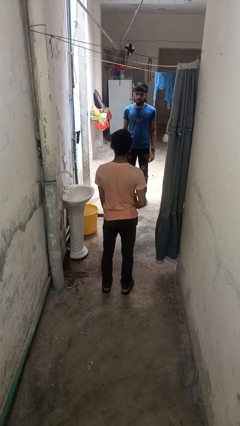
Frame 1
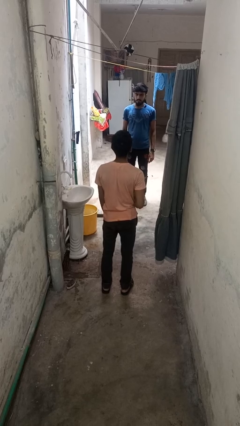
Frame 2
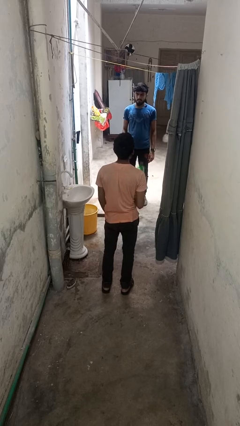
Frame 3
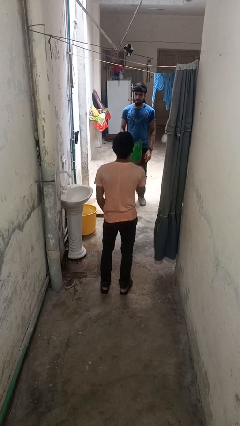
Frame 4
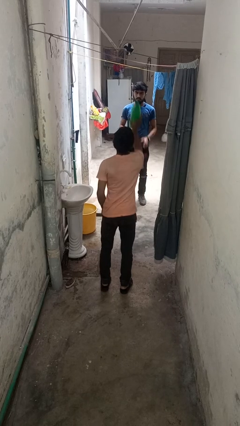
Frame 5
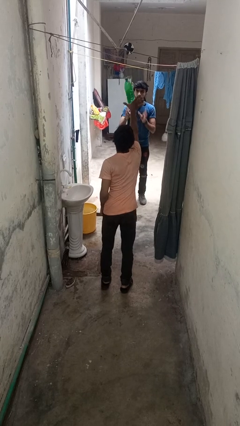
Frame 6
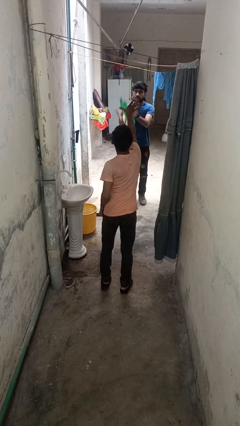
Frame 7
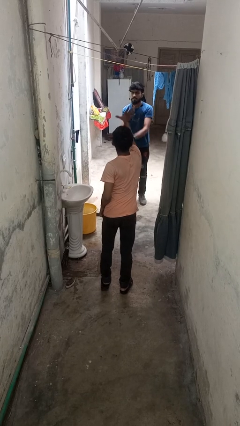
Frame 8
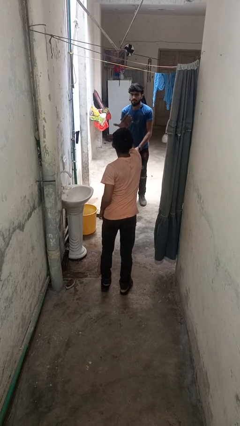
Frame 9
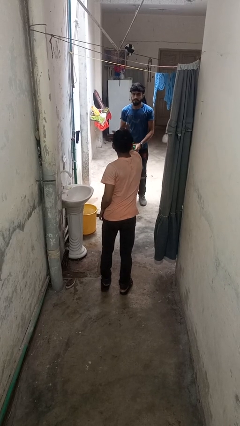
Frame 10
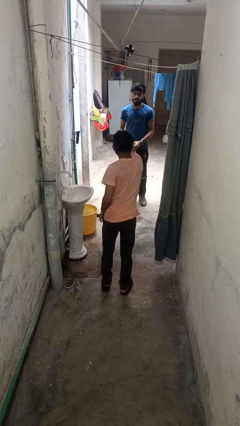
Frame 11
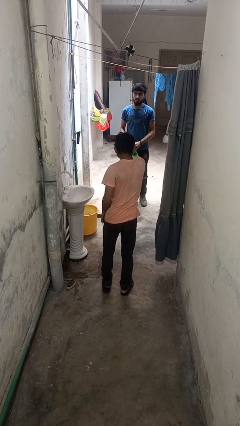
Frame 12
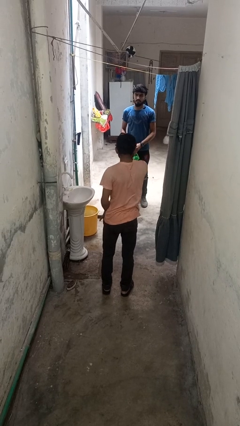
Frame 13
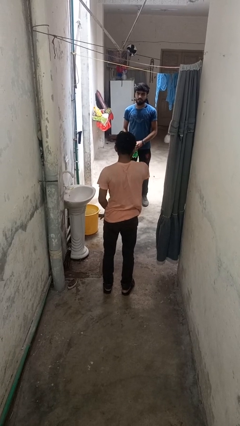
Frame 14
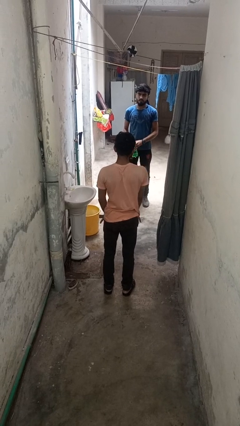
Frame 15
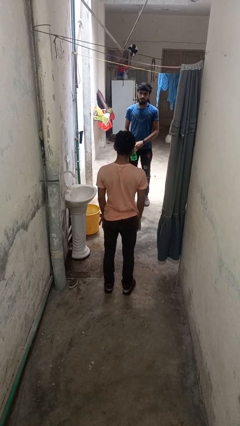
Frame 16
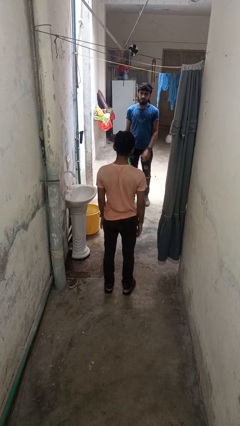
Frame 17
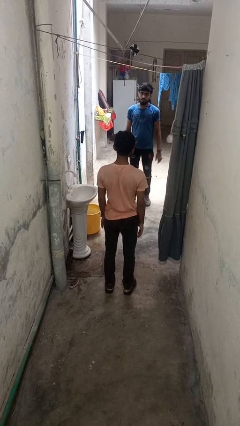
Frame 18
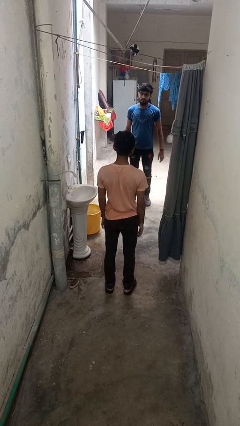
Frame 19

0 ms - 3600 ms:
person throws object to person

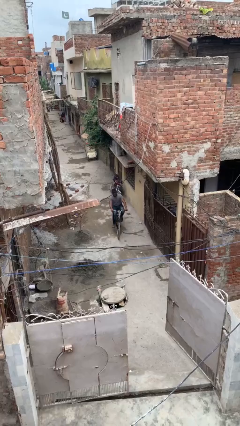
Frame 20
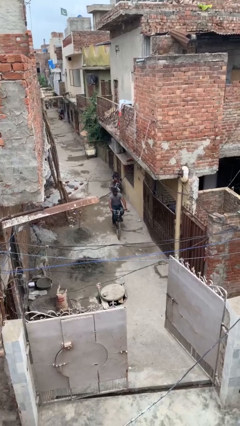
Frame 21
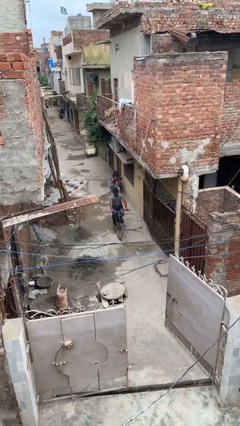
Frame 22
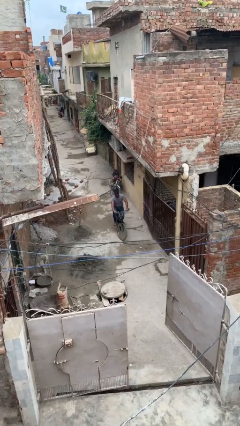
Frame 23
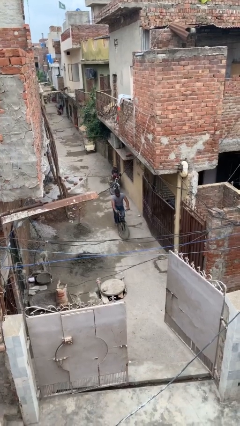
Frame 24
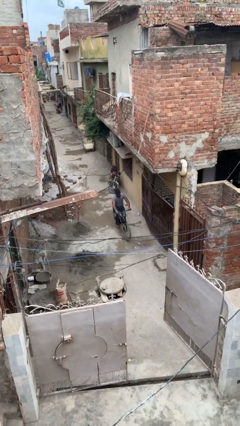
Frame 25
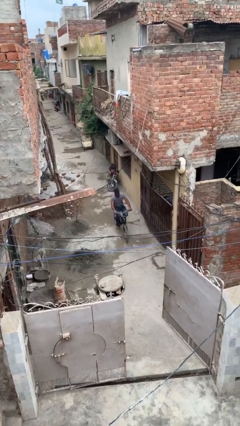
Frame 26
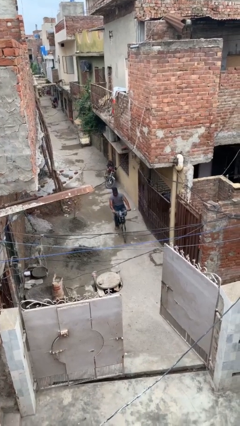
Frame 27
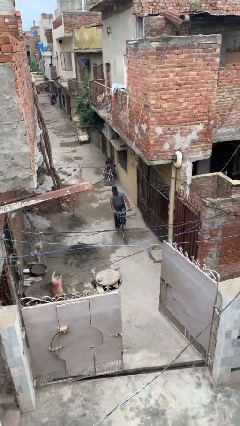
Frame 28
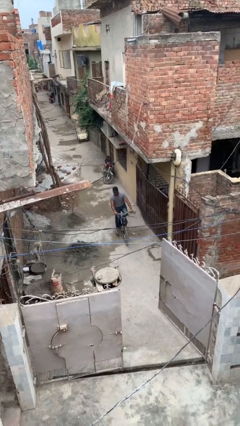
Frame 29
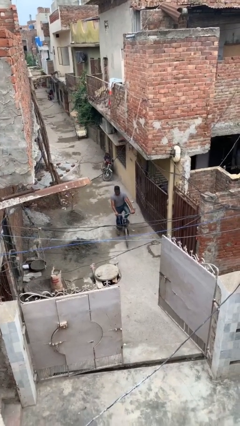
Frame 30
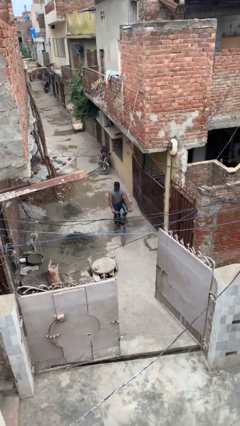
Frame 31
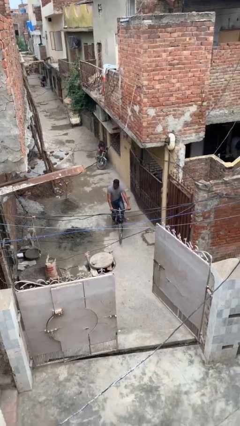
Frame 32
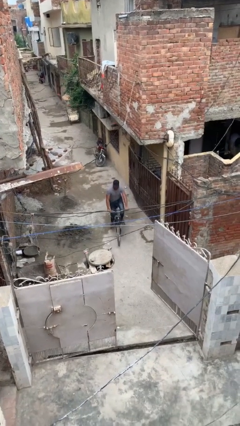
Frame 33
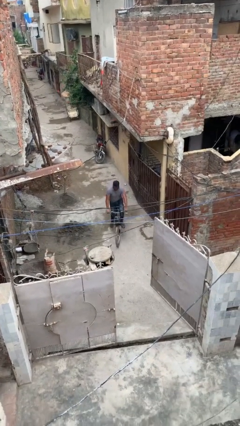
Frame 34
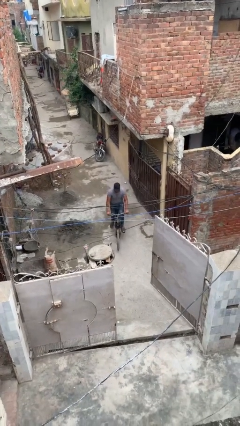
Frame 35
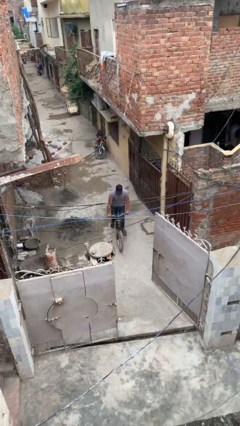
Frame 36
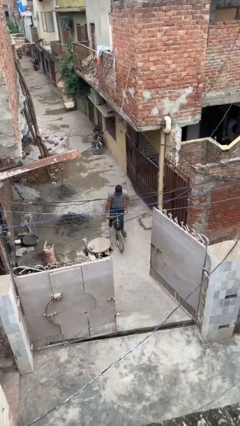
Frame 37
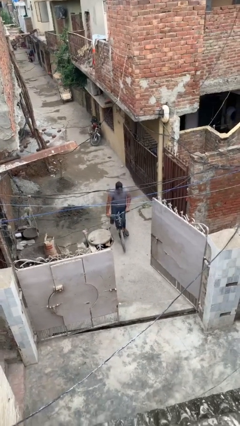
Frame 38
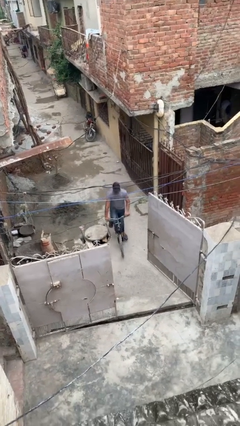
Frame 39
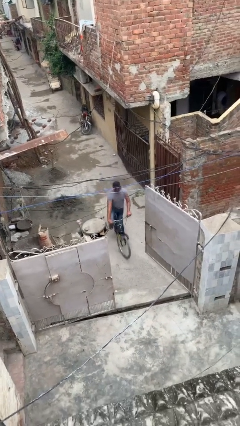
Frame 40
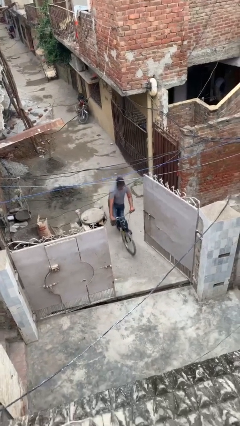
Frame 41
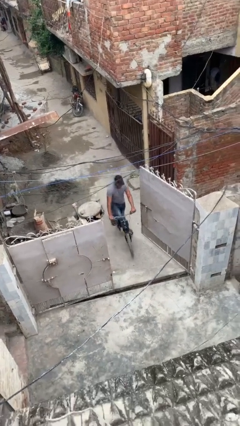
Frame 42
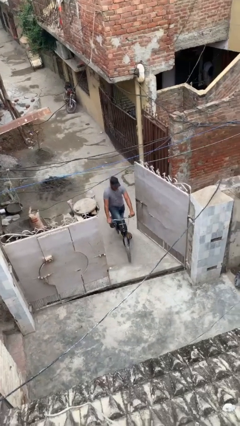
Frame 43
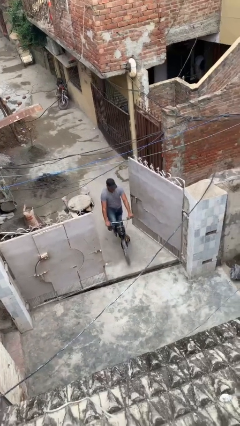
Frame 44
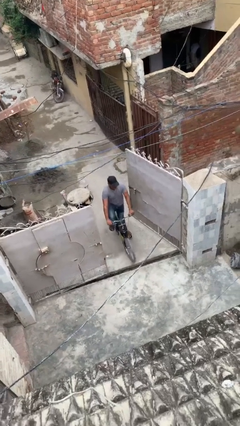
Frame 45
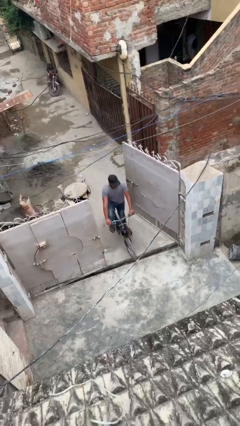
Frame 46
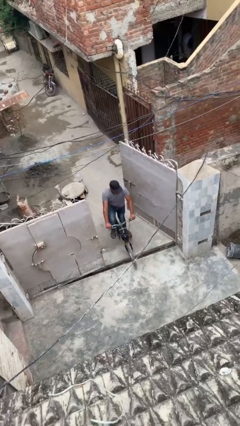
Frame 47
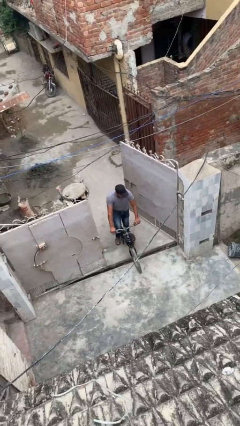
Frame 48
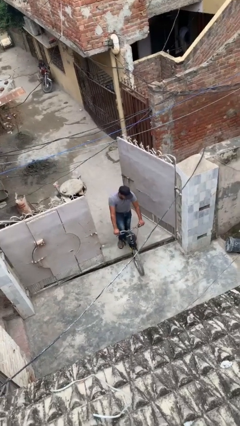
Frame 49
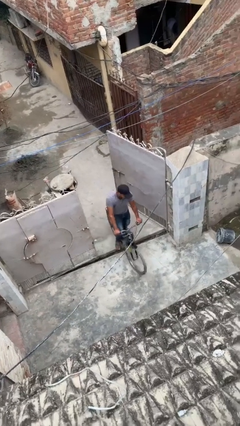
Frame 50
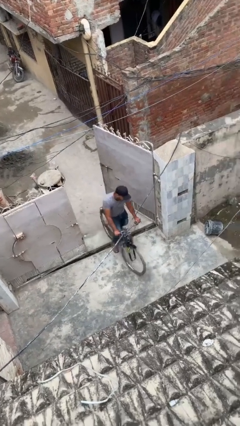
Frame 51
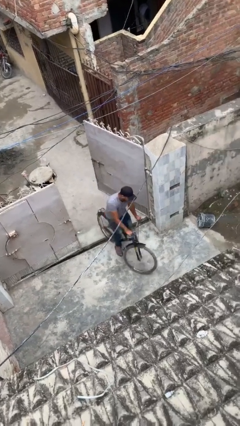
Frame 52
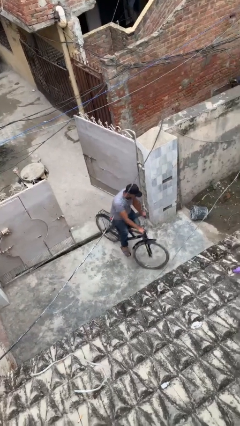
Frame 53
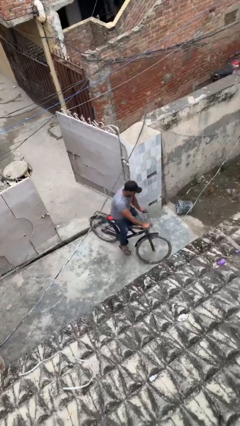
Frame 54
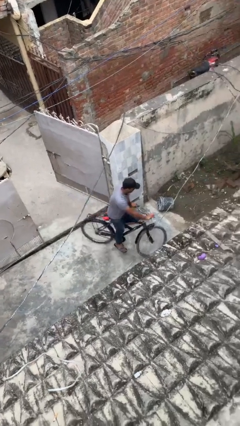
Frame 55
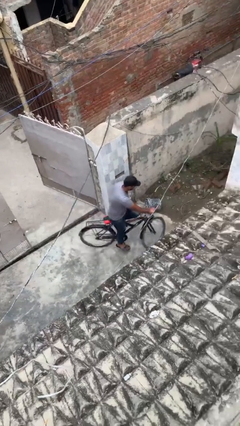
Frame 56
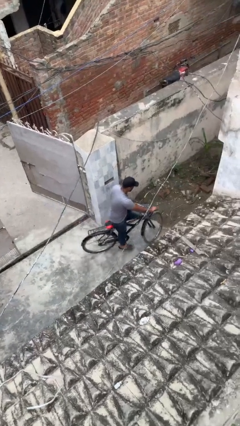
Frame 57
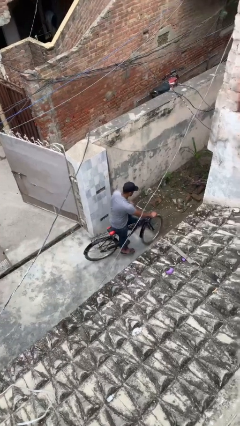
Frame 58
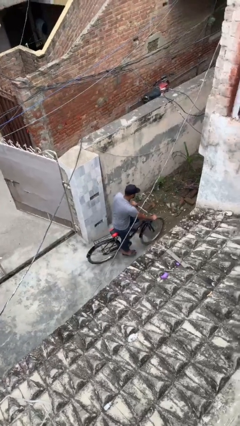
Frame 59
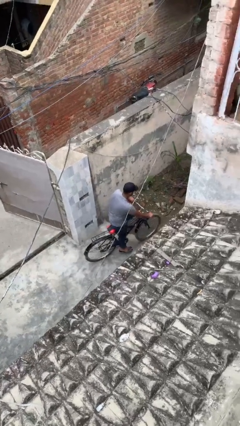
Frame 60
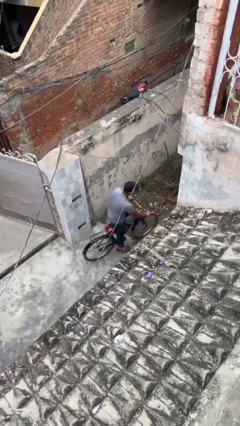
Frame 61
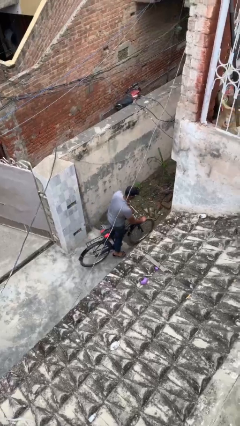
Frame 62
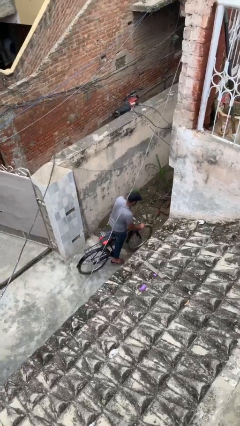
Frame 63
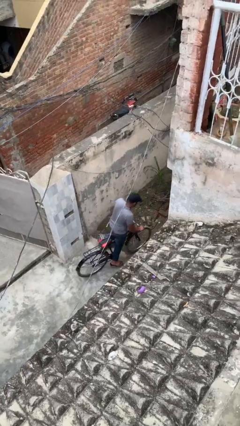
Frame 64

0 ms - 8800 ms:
person rides bicycle

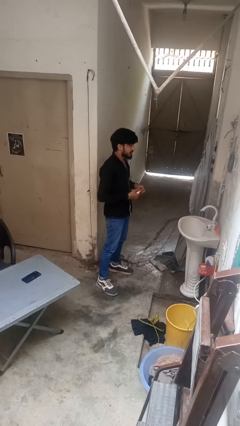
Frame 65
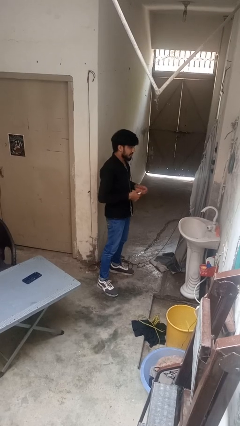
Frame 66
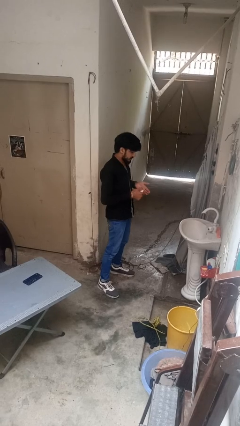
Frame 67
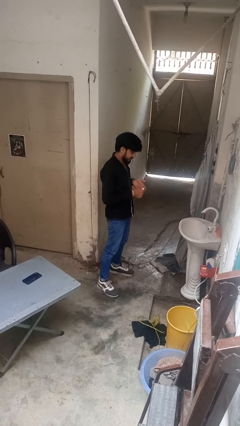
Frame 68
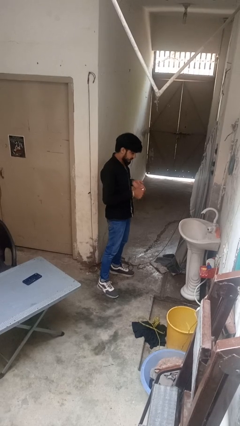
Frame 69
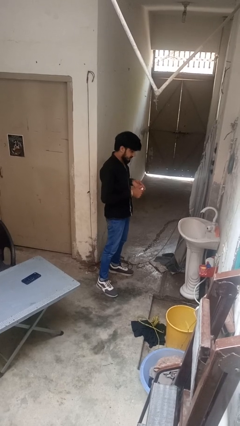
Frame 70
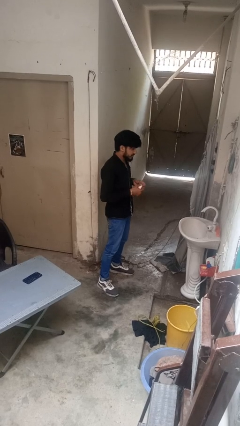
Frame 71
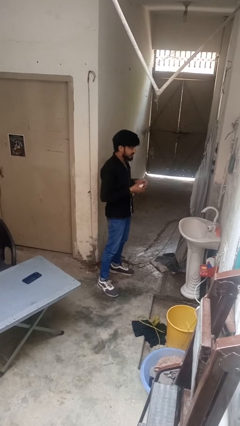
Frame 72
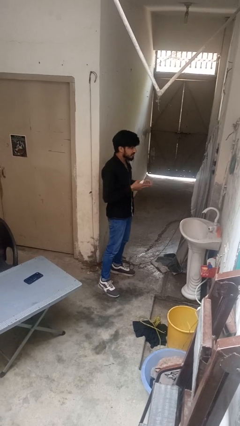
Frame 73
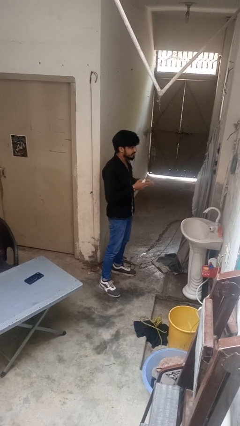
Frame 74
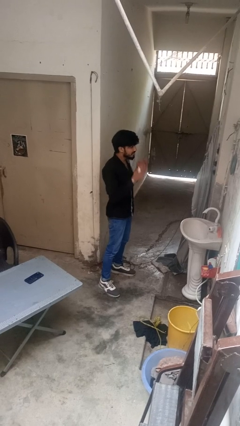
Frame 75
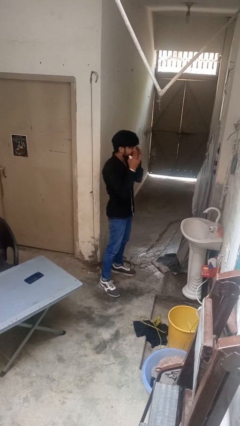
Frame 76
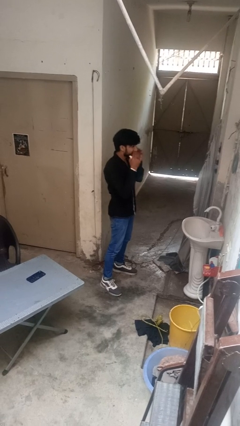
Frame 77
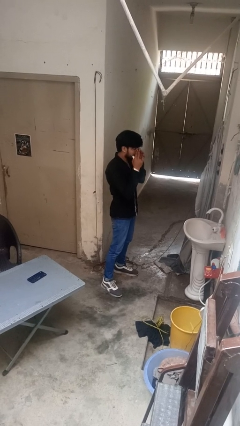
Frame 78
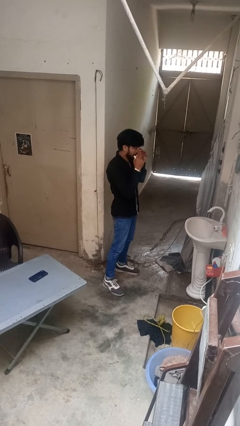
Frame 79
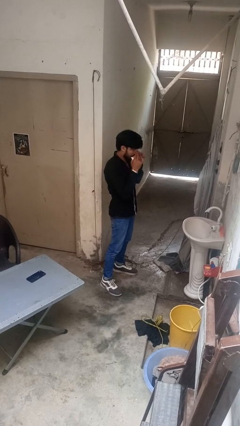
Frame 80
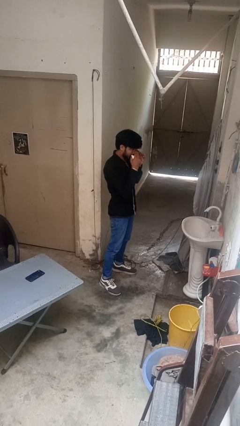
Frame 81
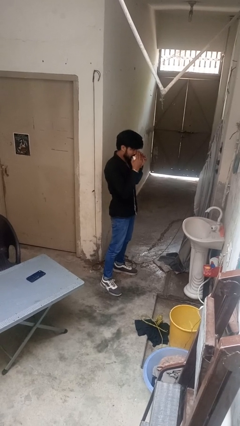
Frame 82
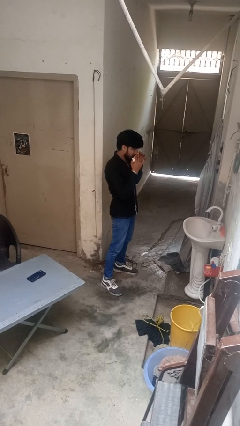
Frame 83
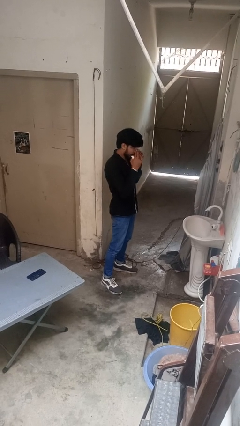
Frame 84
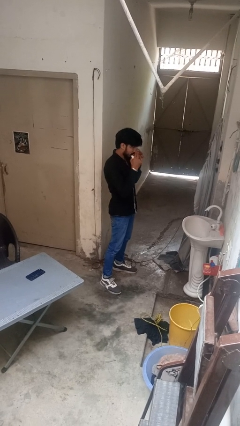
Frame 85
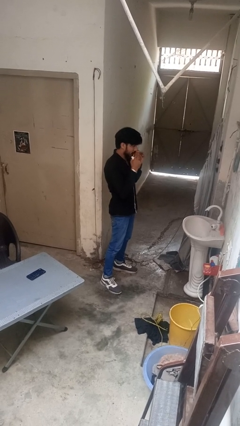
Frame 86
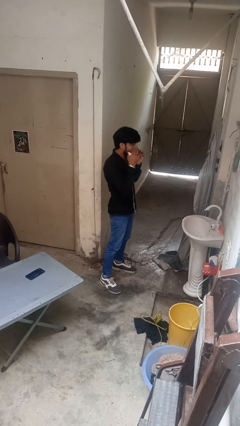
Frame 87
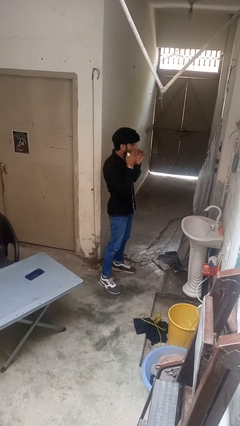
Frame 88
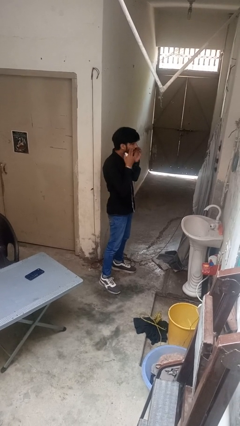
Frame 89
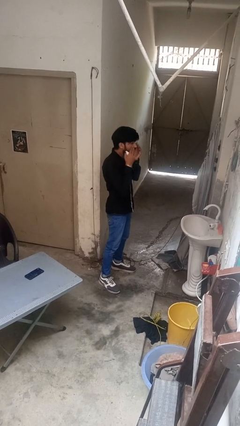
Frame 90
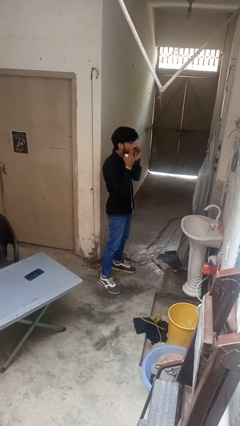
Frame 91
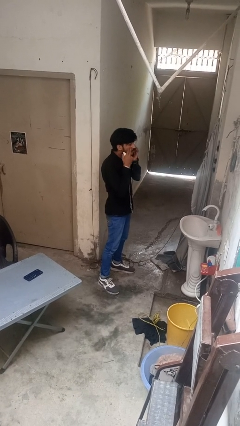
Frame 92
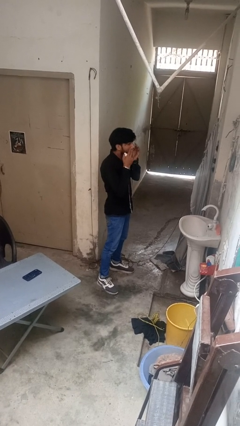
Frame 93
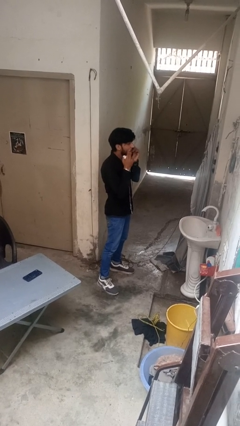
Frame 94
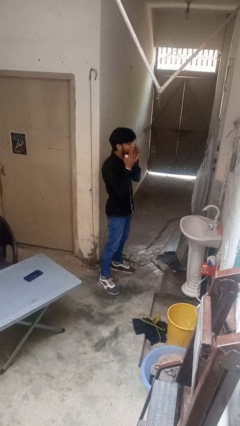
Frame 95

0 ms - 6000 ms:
person applies foundation makeup
